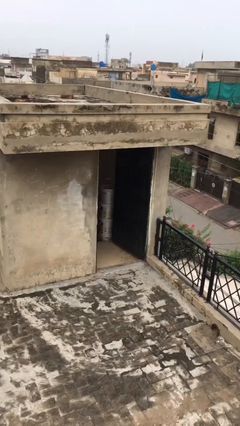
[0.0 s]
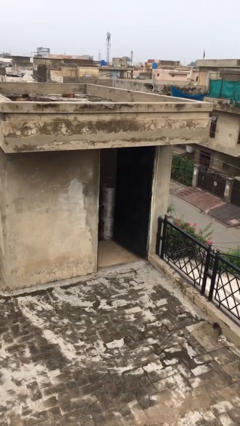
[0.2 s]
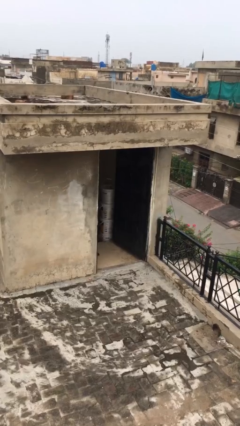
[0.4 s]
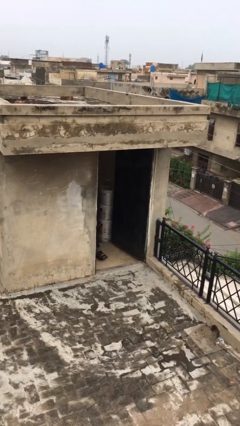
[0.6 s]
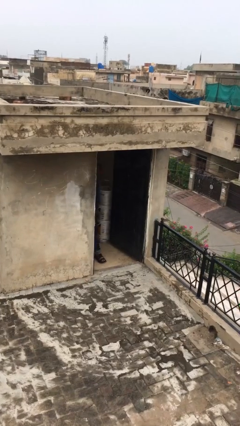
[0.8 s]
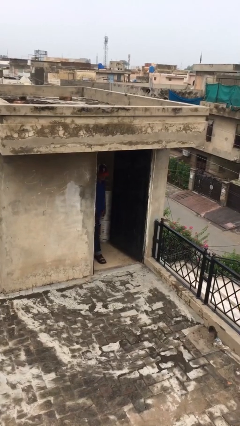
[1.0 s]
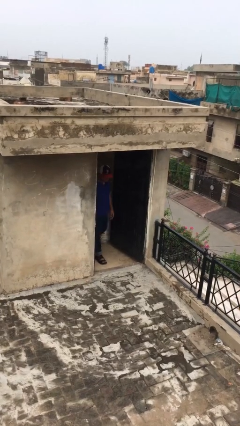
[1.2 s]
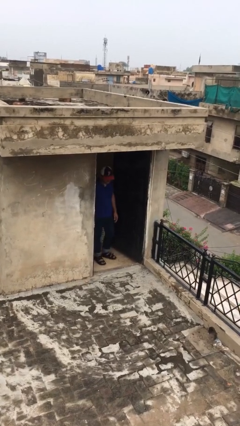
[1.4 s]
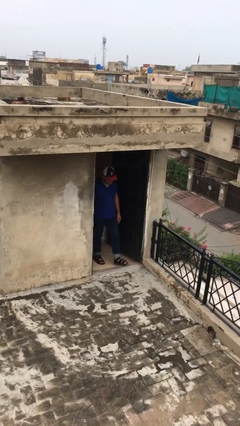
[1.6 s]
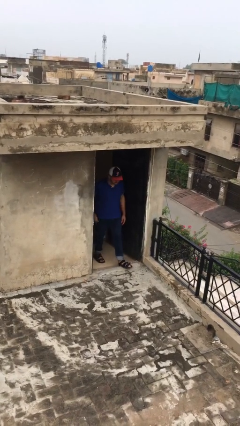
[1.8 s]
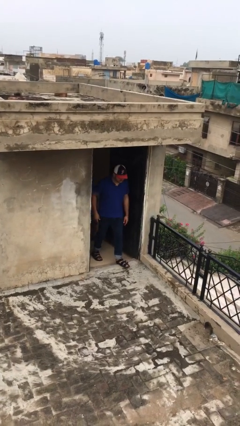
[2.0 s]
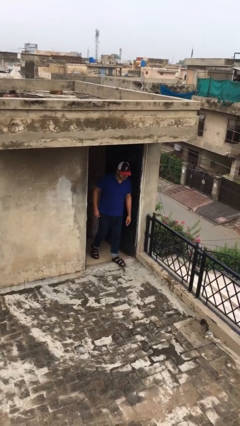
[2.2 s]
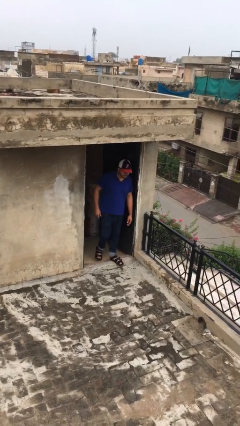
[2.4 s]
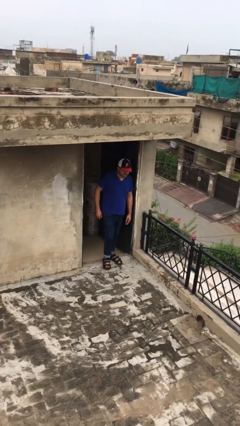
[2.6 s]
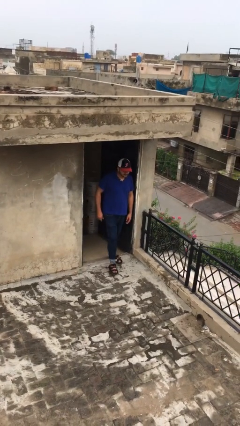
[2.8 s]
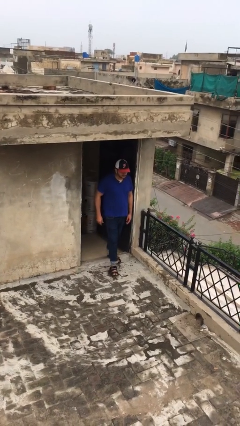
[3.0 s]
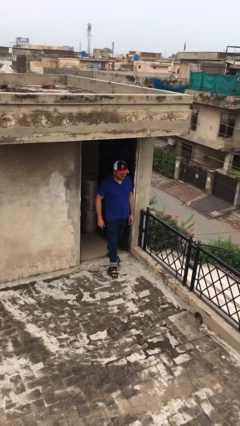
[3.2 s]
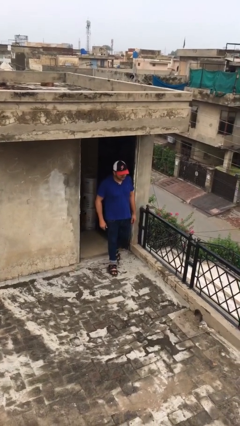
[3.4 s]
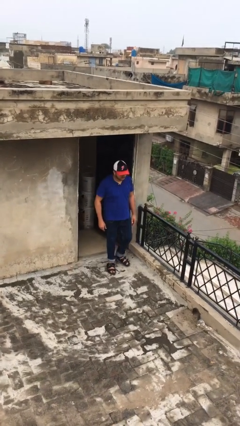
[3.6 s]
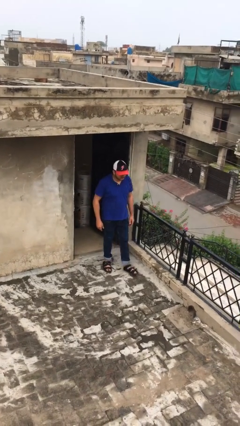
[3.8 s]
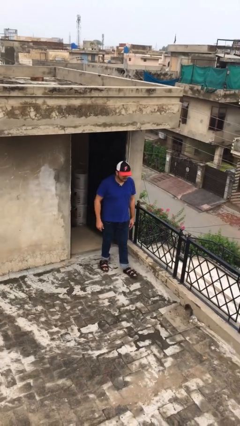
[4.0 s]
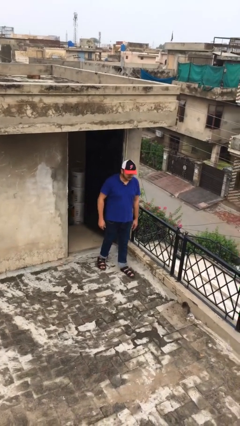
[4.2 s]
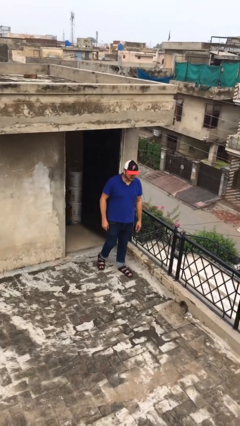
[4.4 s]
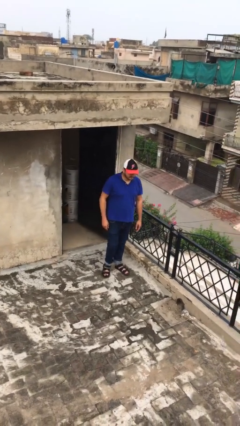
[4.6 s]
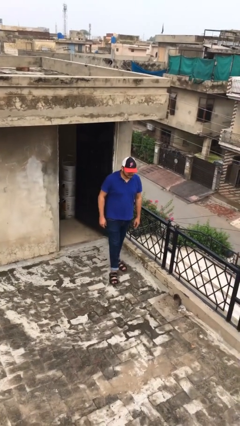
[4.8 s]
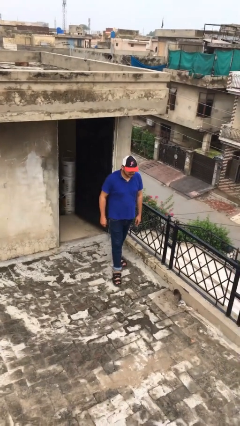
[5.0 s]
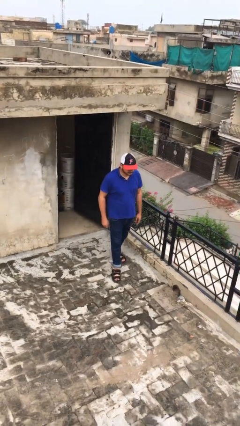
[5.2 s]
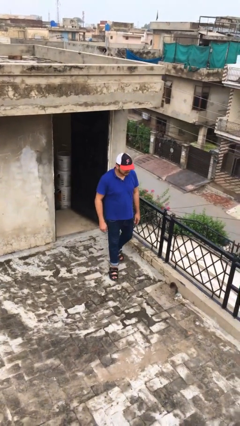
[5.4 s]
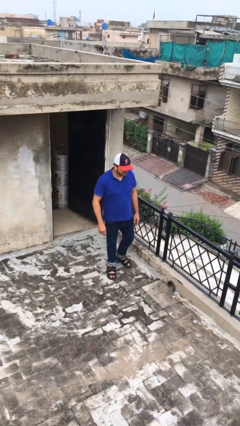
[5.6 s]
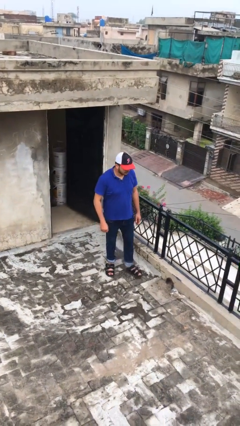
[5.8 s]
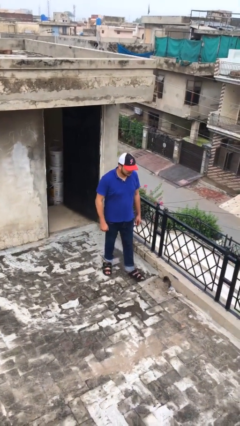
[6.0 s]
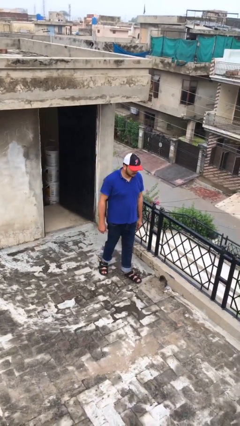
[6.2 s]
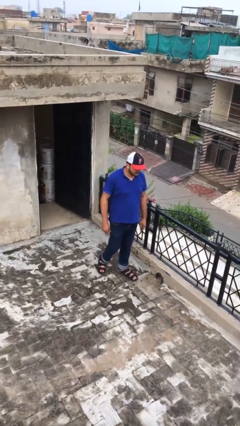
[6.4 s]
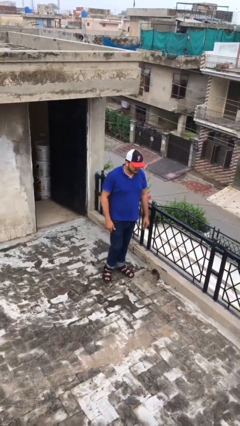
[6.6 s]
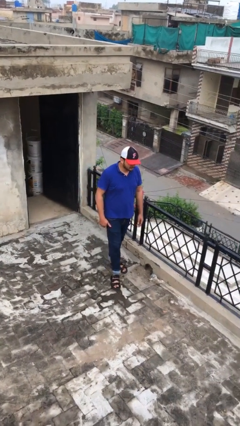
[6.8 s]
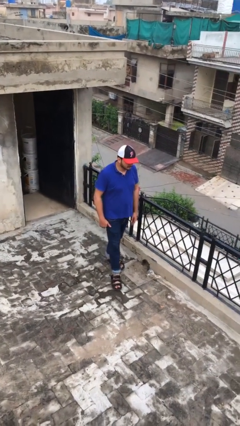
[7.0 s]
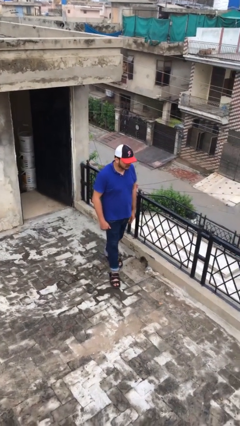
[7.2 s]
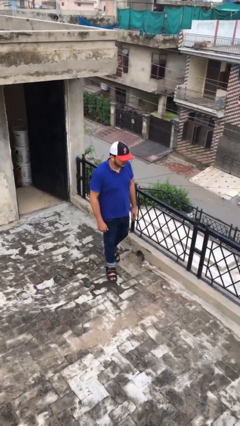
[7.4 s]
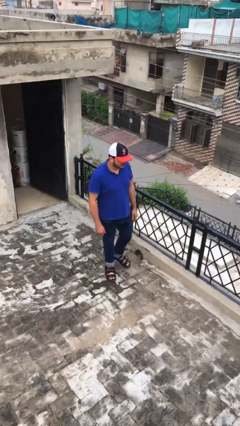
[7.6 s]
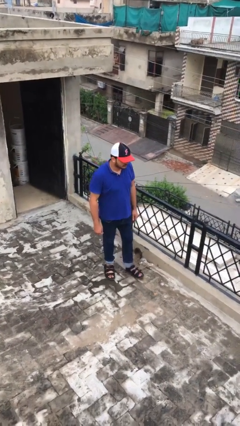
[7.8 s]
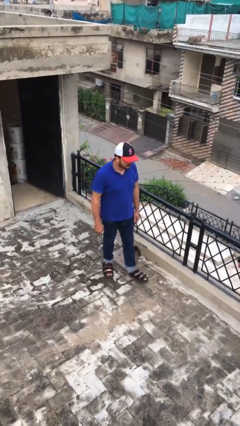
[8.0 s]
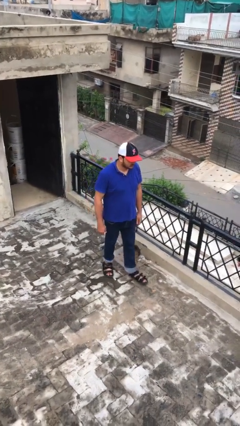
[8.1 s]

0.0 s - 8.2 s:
person enters scene through structure

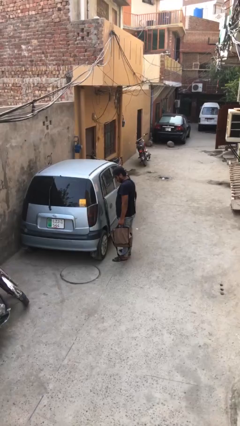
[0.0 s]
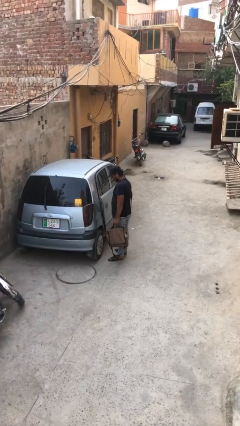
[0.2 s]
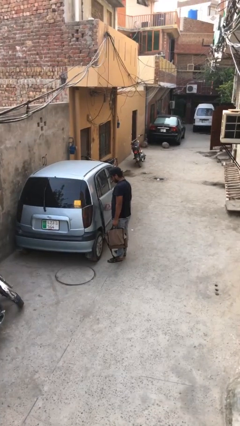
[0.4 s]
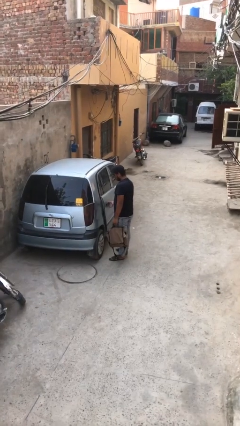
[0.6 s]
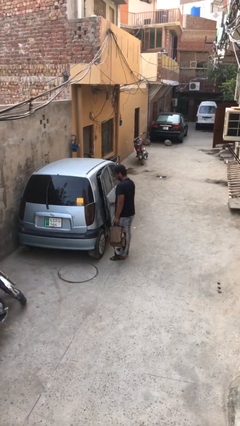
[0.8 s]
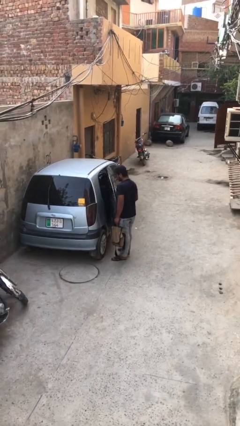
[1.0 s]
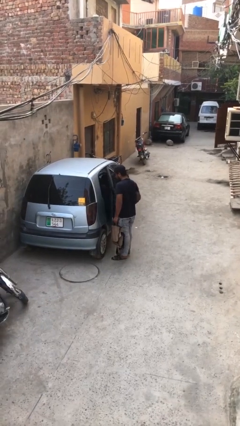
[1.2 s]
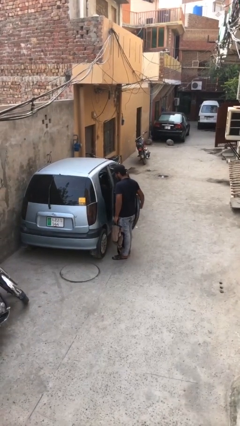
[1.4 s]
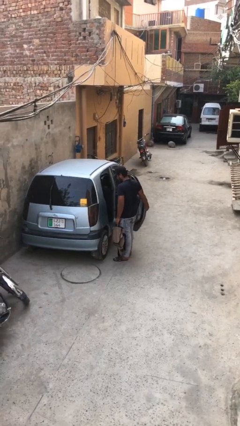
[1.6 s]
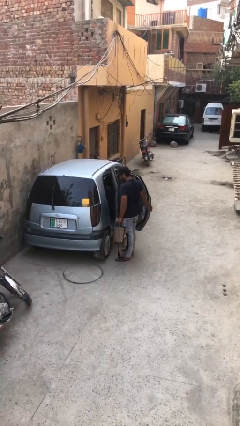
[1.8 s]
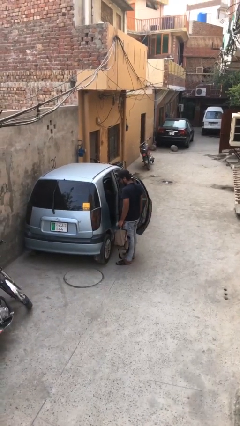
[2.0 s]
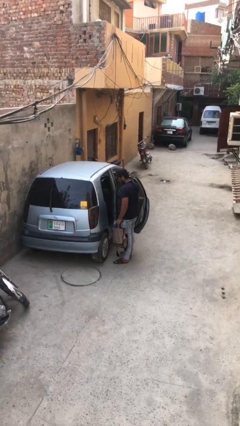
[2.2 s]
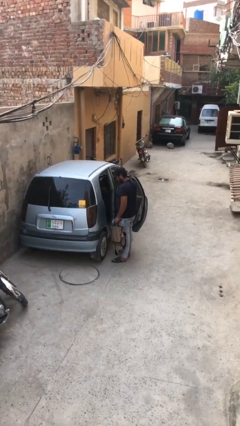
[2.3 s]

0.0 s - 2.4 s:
person opens car door

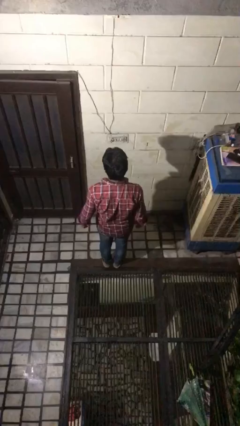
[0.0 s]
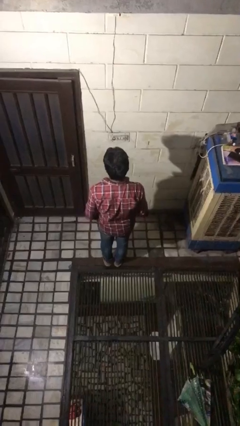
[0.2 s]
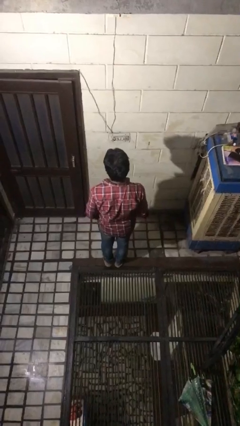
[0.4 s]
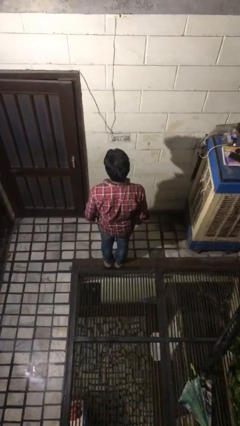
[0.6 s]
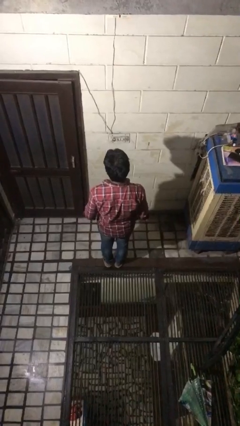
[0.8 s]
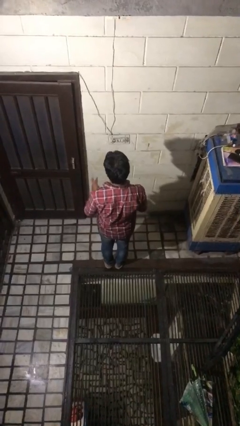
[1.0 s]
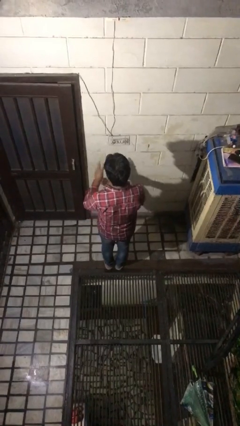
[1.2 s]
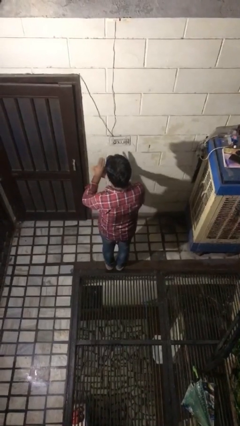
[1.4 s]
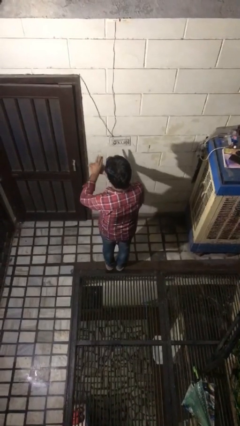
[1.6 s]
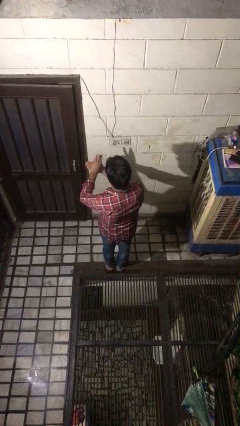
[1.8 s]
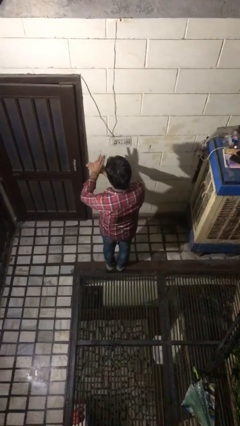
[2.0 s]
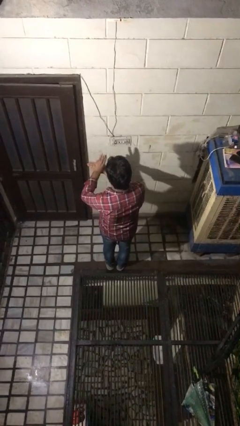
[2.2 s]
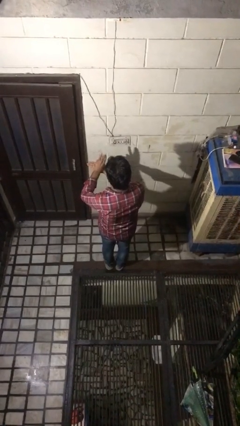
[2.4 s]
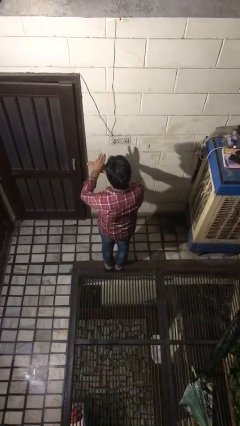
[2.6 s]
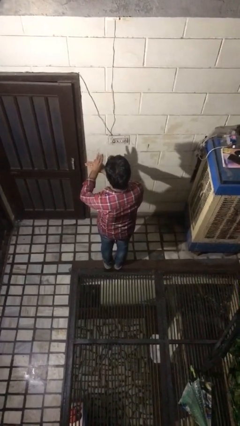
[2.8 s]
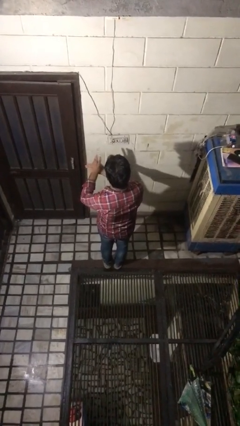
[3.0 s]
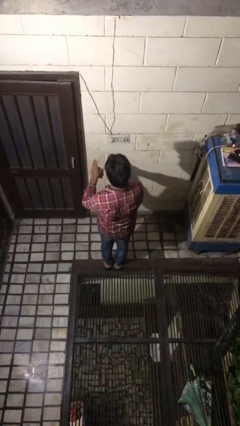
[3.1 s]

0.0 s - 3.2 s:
person gestures number three

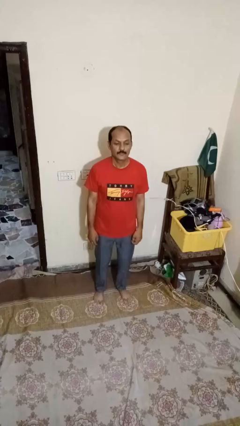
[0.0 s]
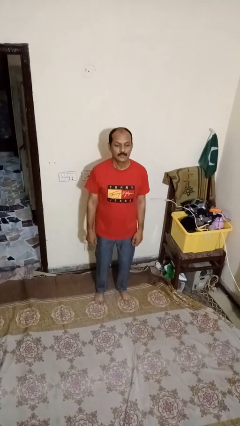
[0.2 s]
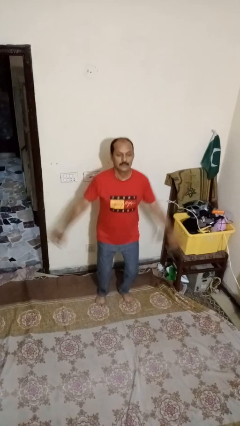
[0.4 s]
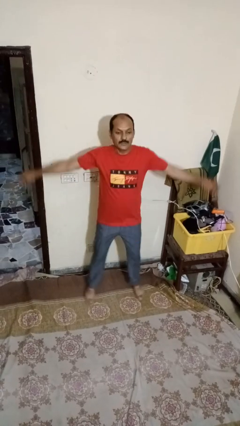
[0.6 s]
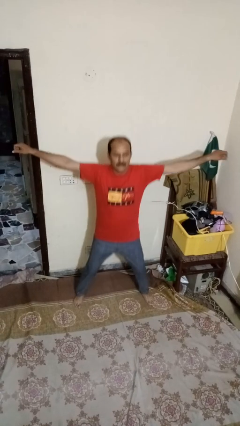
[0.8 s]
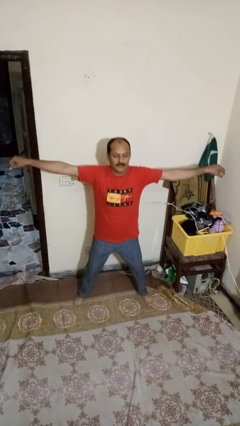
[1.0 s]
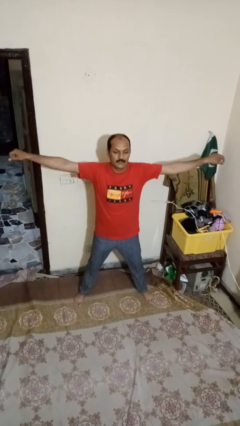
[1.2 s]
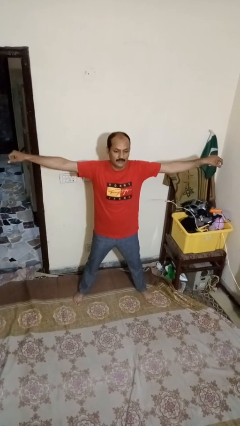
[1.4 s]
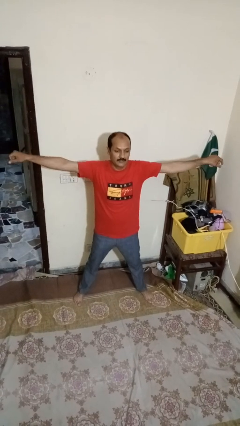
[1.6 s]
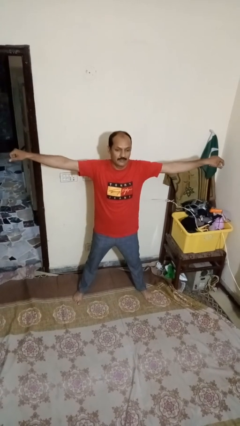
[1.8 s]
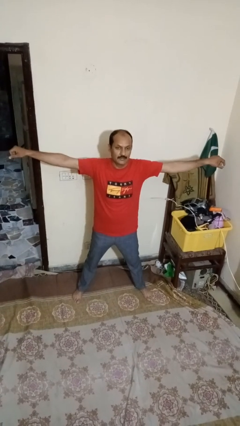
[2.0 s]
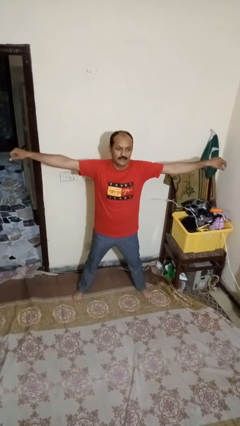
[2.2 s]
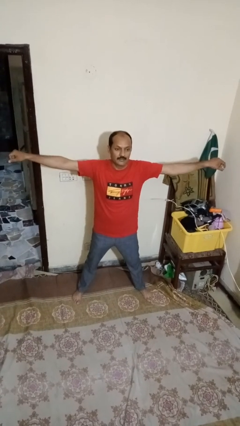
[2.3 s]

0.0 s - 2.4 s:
person exercises with jumping jacks

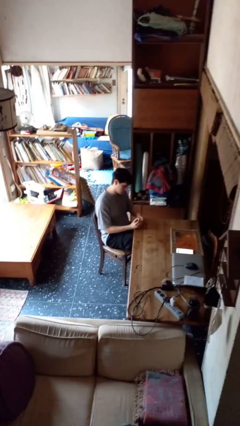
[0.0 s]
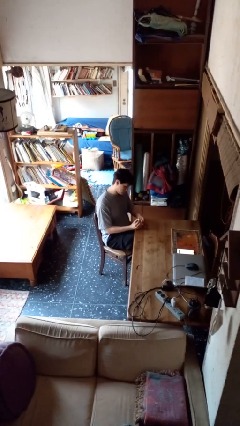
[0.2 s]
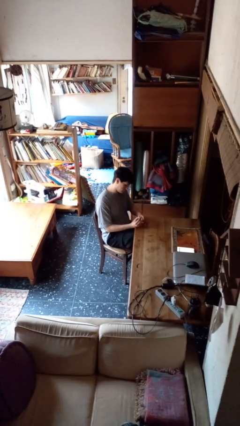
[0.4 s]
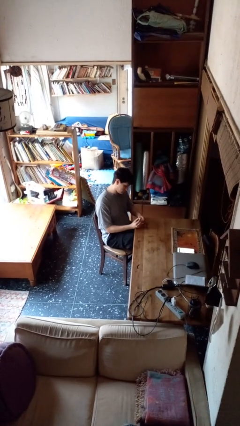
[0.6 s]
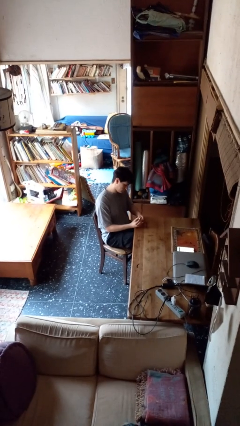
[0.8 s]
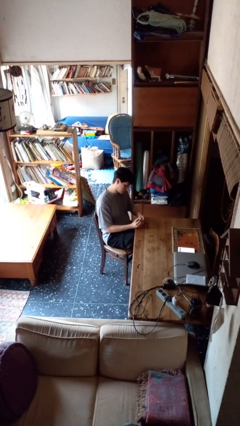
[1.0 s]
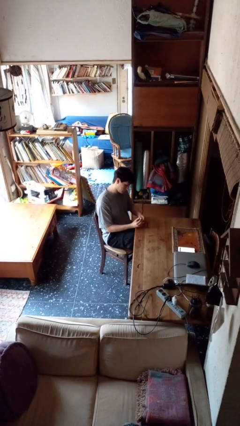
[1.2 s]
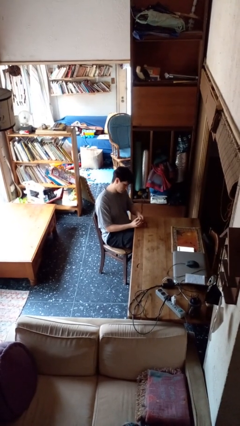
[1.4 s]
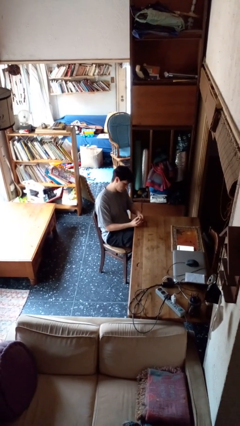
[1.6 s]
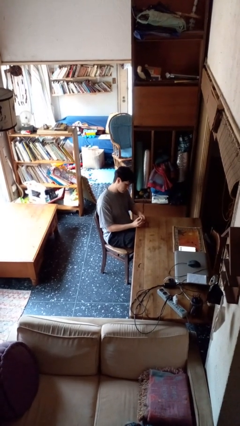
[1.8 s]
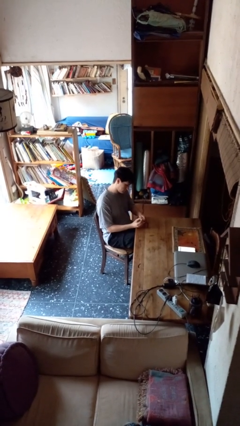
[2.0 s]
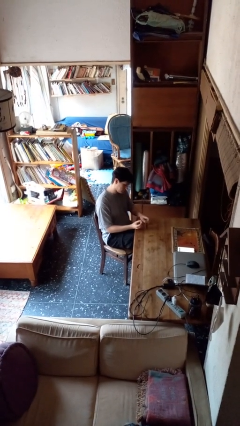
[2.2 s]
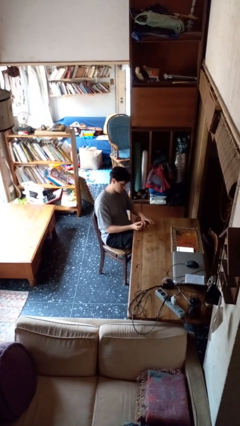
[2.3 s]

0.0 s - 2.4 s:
person paints fingernails
